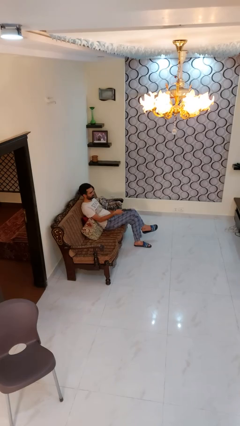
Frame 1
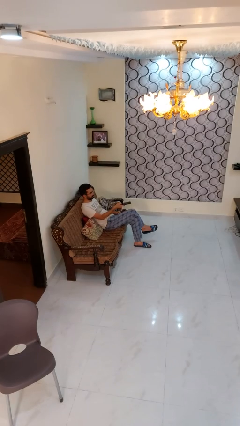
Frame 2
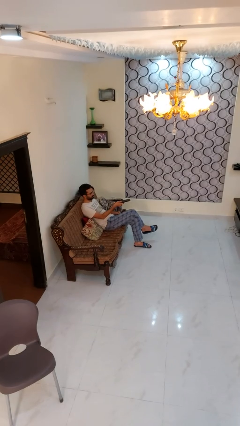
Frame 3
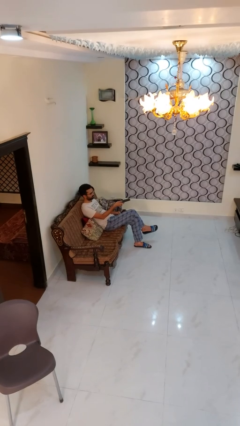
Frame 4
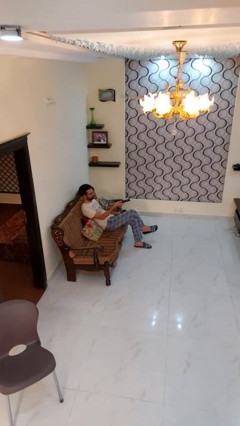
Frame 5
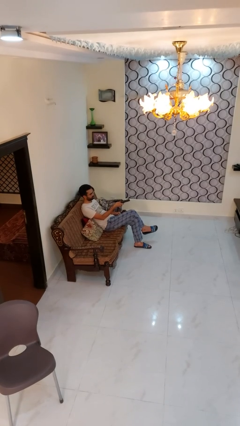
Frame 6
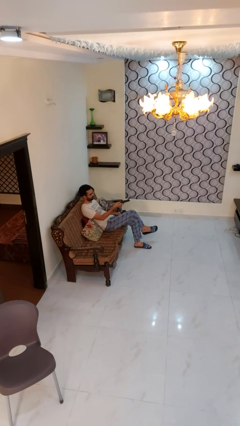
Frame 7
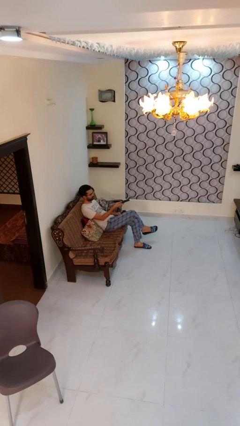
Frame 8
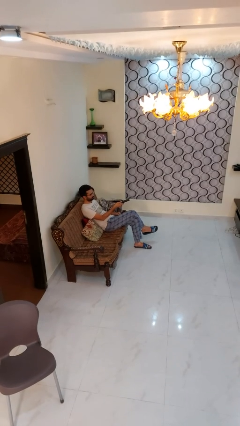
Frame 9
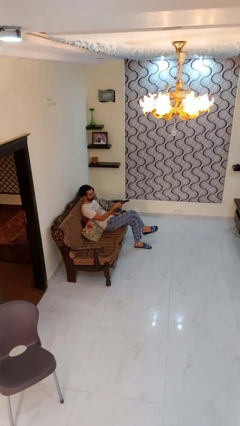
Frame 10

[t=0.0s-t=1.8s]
person uses television remote

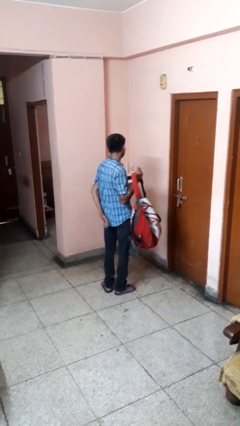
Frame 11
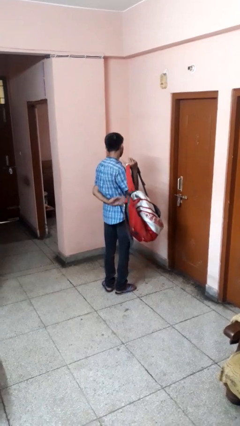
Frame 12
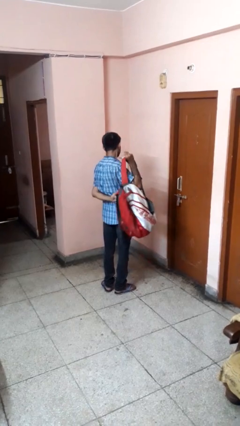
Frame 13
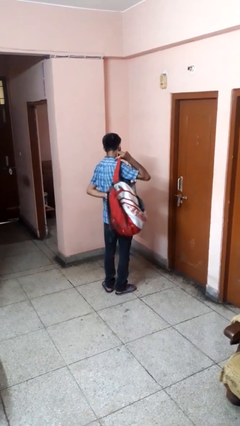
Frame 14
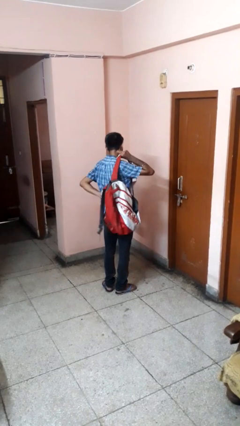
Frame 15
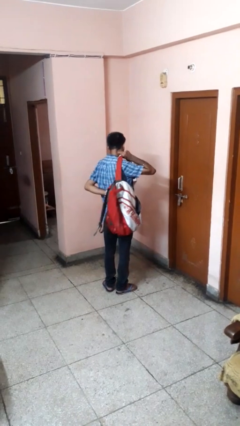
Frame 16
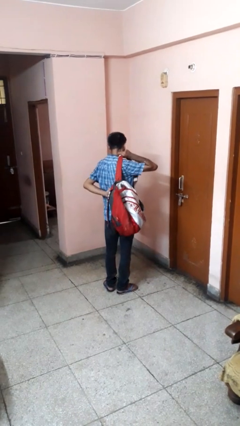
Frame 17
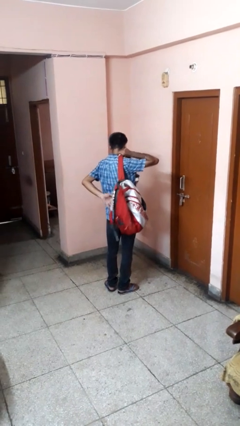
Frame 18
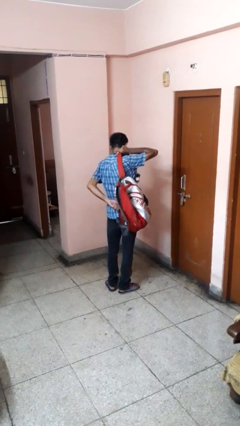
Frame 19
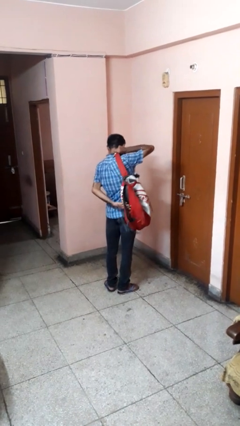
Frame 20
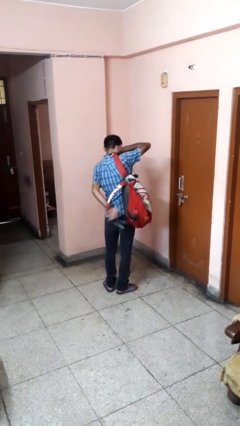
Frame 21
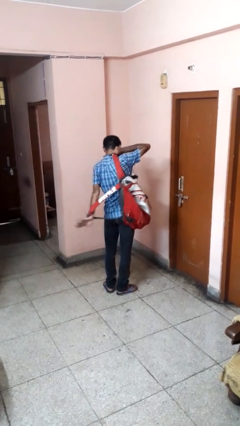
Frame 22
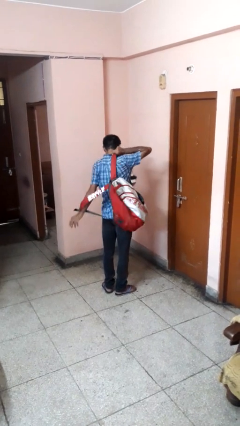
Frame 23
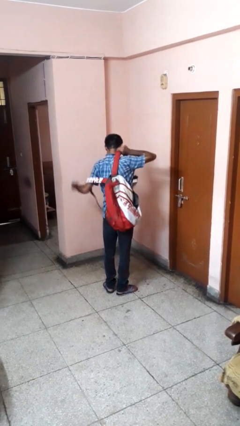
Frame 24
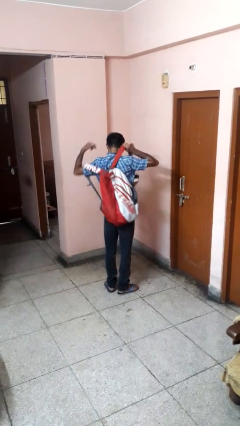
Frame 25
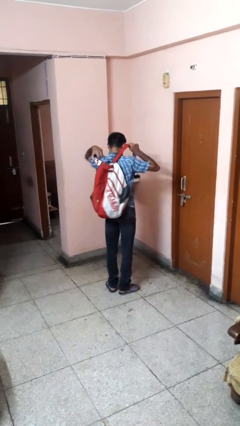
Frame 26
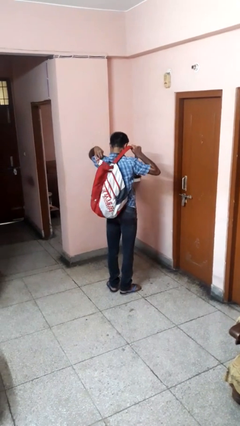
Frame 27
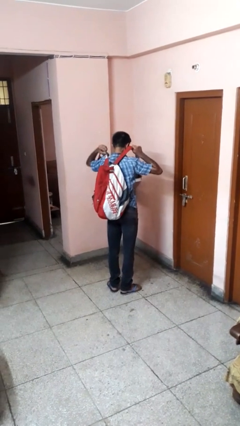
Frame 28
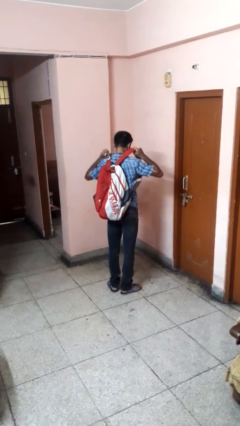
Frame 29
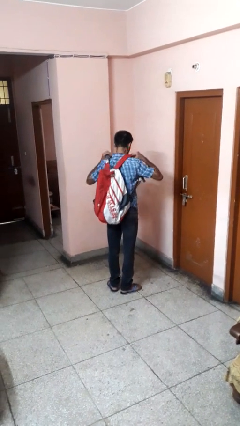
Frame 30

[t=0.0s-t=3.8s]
person puts on backpack

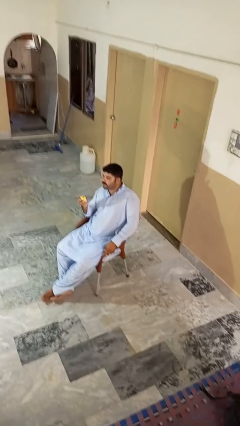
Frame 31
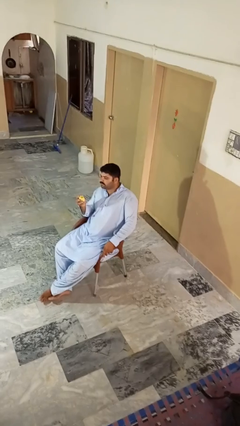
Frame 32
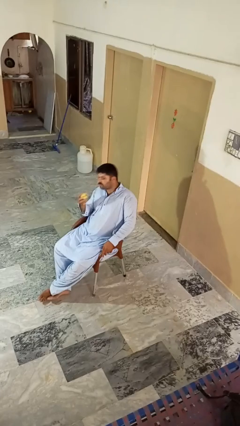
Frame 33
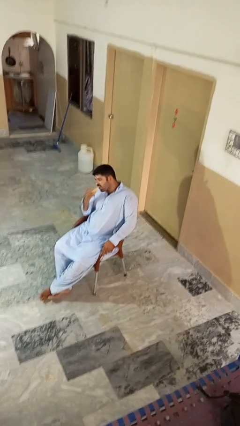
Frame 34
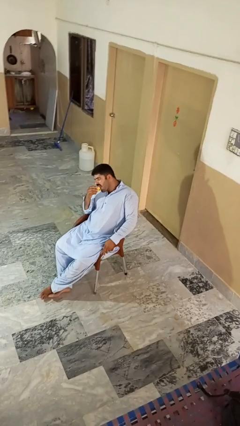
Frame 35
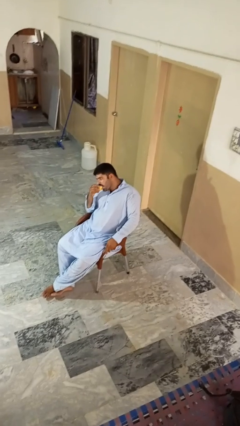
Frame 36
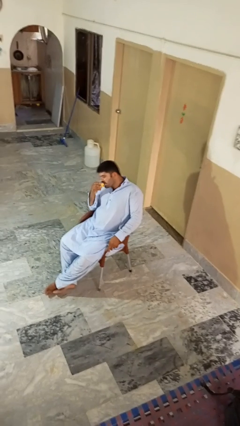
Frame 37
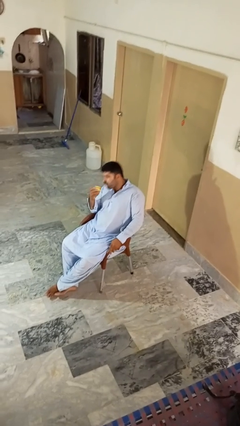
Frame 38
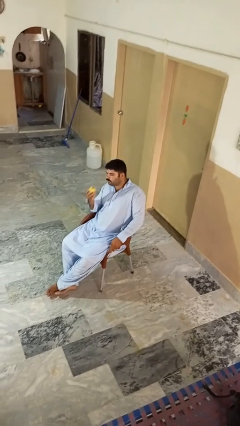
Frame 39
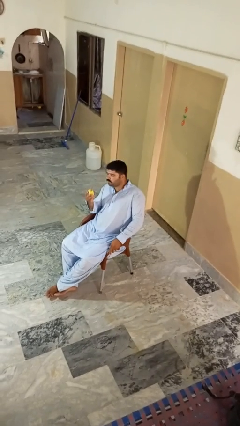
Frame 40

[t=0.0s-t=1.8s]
person eats apple

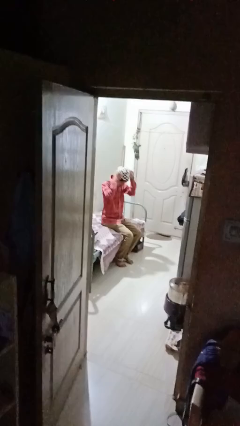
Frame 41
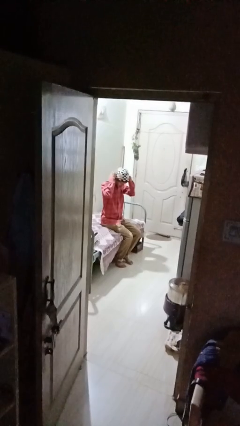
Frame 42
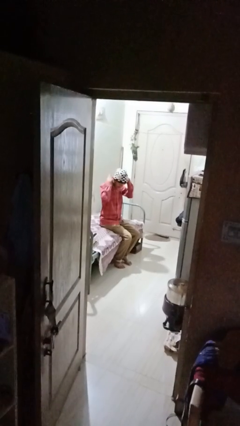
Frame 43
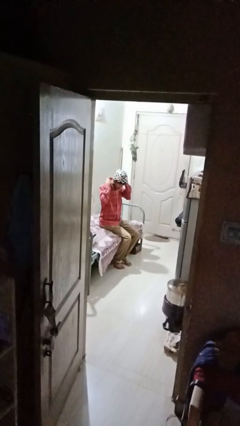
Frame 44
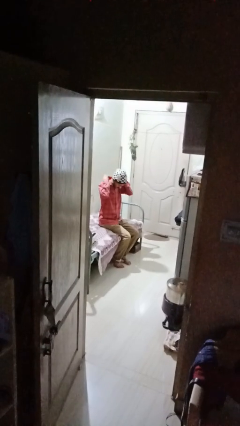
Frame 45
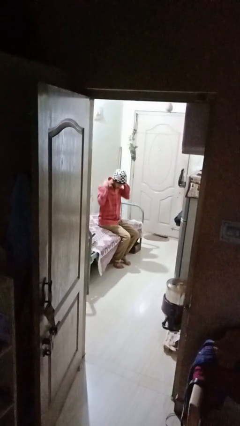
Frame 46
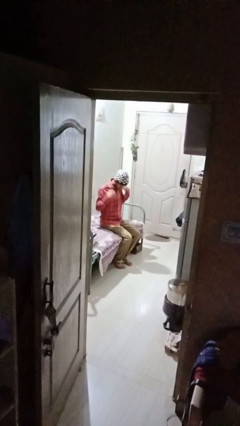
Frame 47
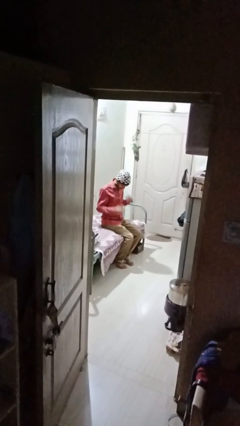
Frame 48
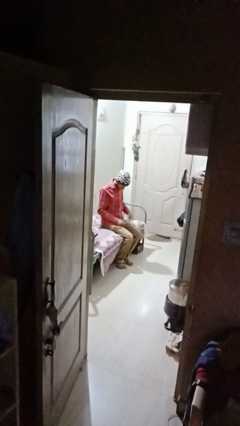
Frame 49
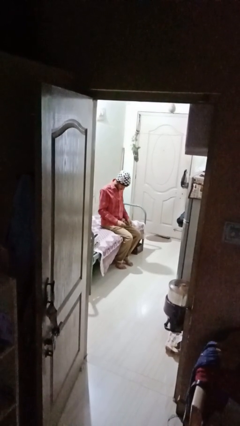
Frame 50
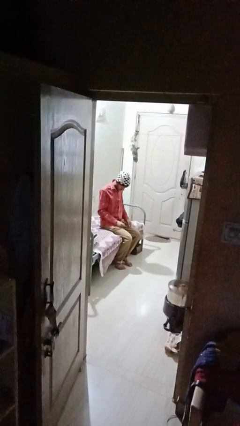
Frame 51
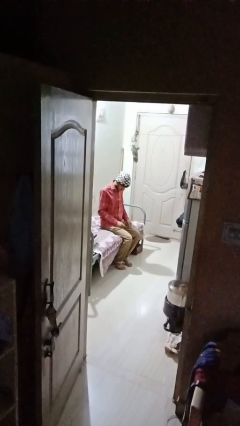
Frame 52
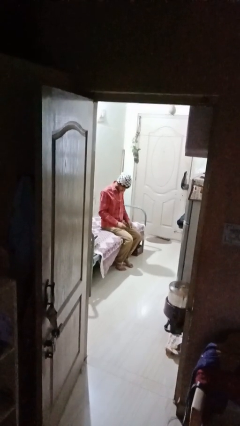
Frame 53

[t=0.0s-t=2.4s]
person puts on necklace

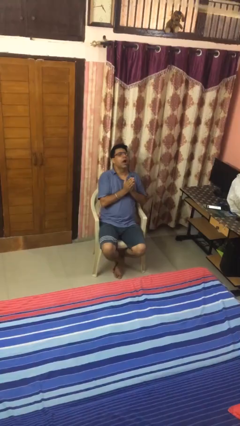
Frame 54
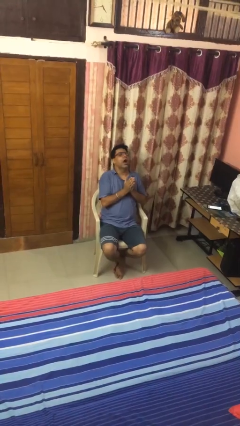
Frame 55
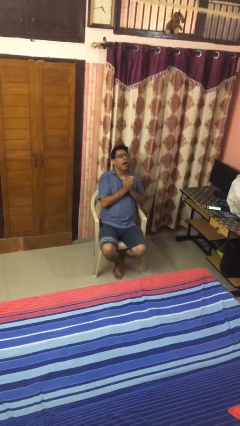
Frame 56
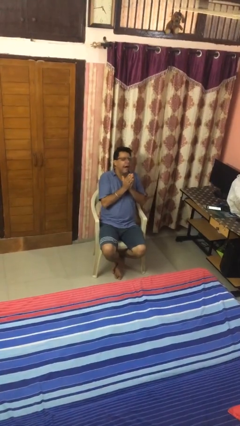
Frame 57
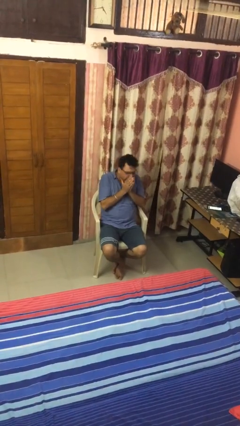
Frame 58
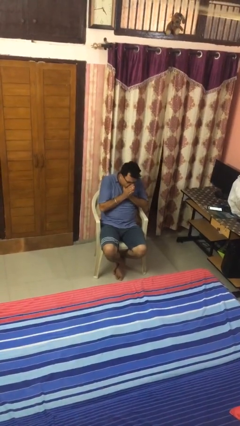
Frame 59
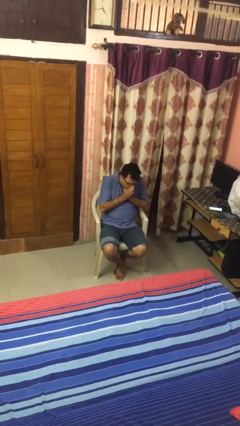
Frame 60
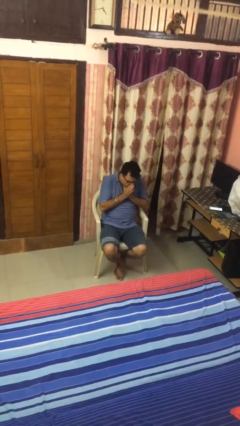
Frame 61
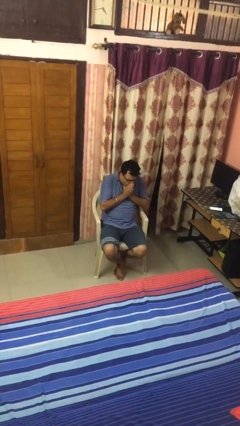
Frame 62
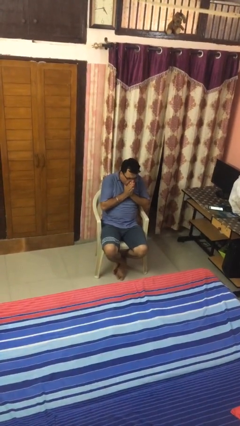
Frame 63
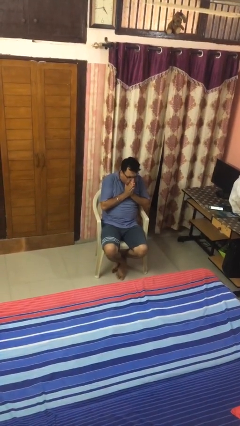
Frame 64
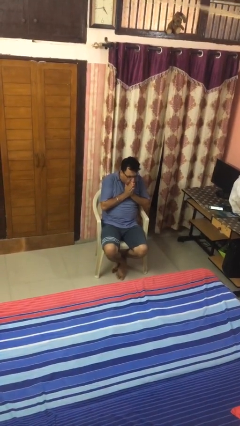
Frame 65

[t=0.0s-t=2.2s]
person sneezes into hand

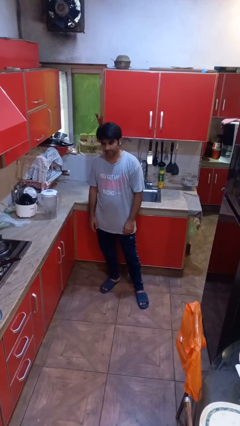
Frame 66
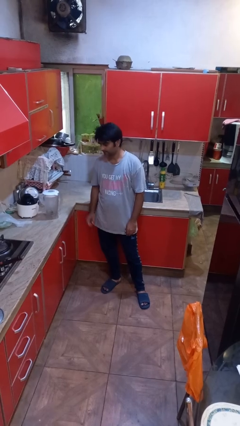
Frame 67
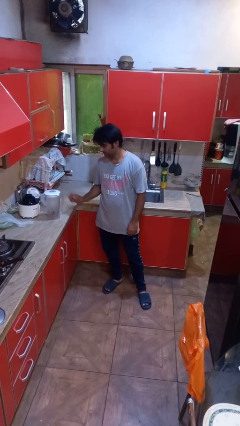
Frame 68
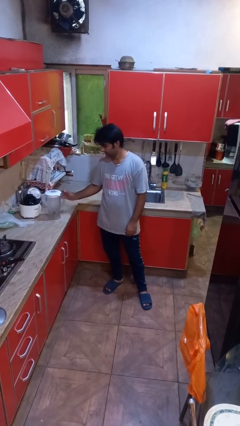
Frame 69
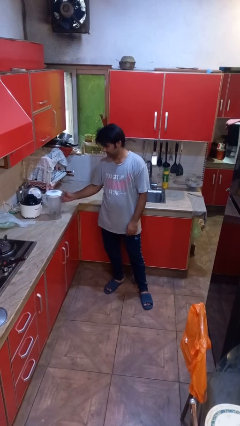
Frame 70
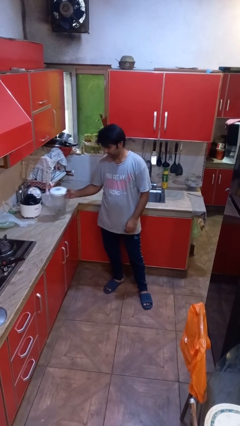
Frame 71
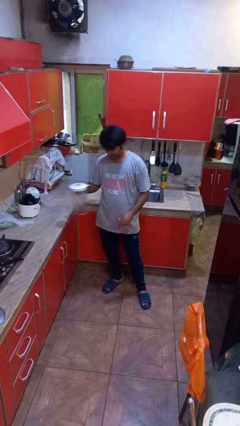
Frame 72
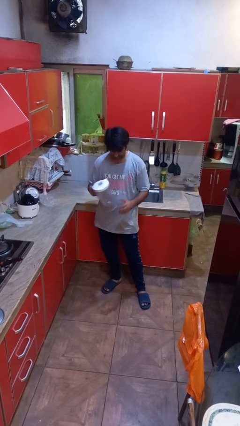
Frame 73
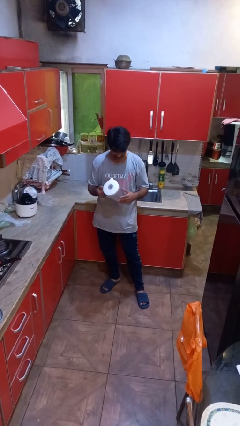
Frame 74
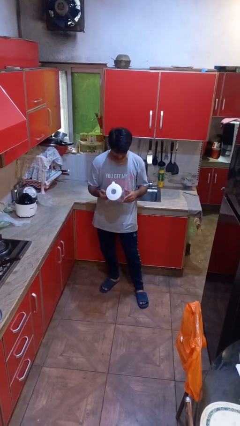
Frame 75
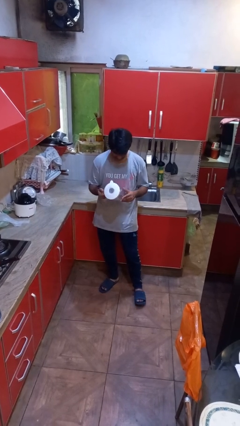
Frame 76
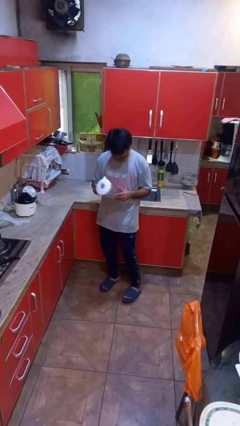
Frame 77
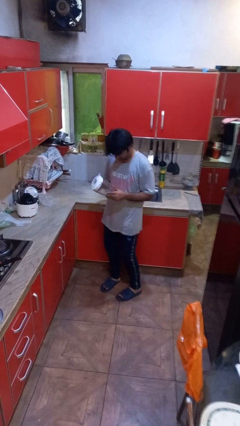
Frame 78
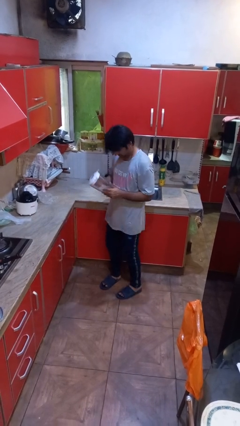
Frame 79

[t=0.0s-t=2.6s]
person picks up object from countertop

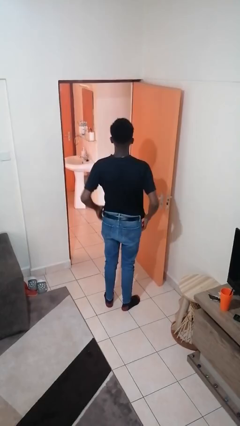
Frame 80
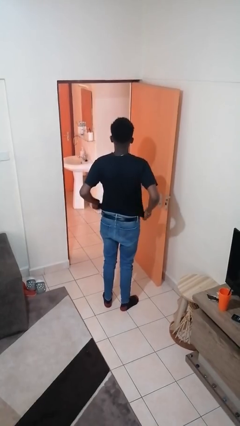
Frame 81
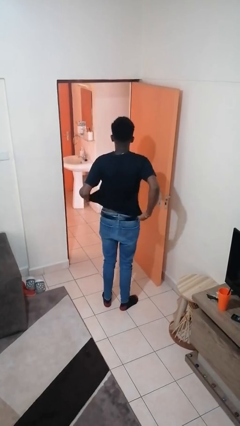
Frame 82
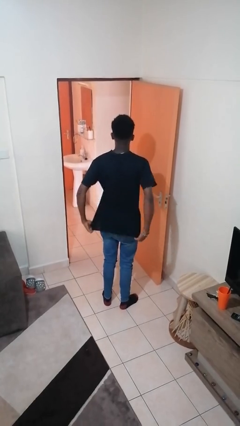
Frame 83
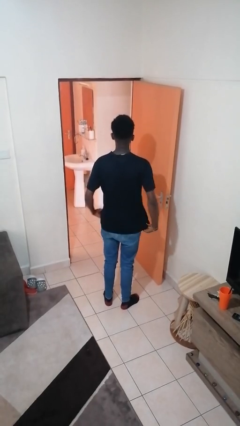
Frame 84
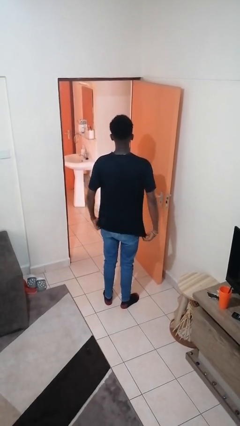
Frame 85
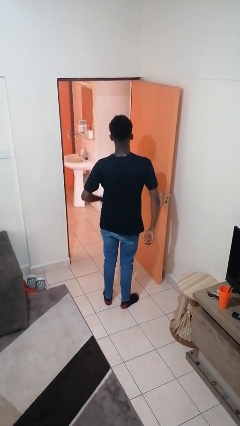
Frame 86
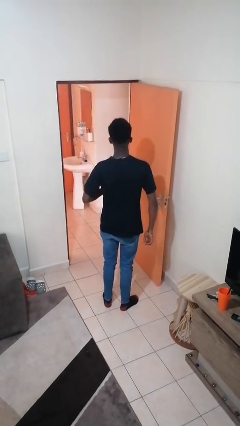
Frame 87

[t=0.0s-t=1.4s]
person untucks shirt

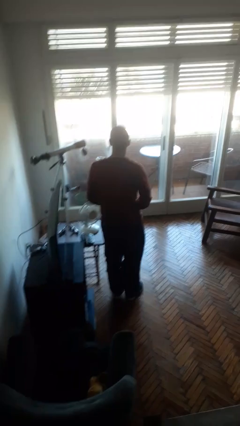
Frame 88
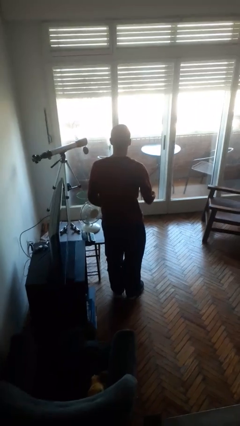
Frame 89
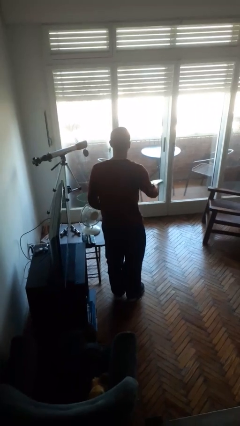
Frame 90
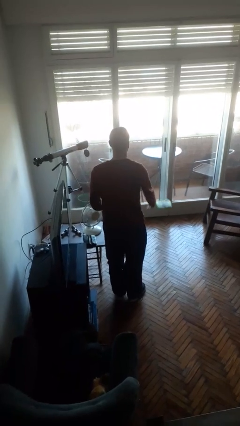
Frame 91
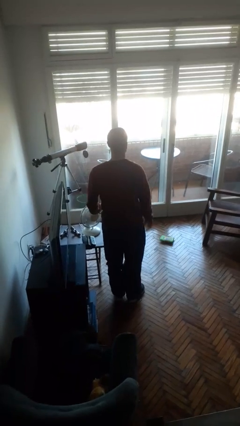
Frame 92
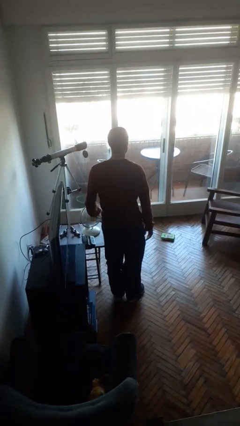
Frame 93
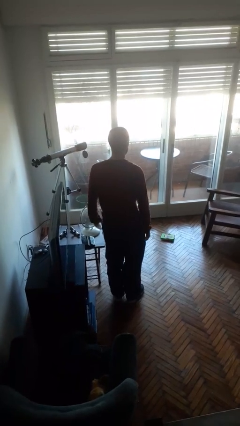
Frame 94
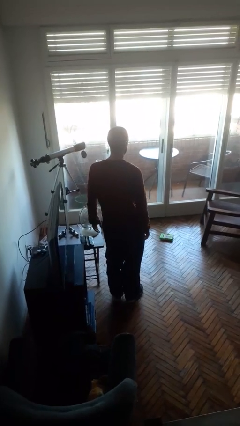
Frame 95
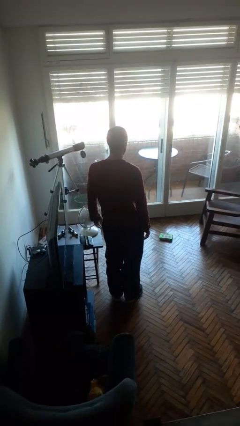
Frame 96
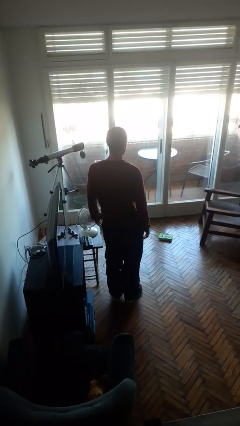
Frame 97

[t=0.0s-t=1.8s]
person throws object to ground
